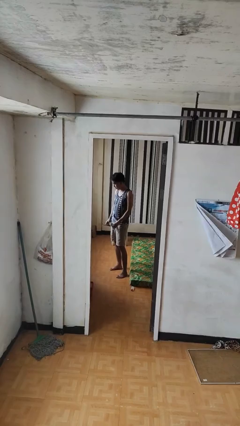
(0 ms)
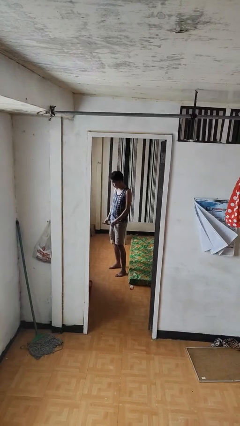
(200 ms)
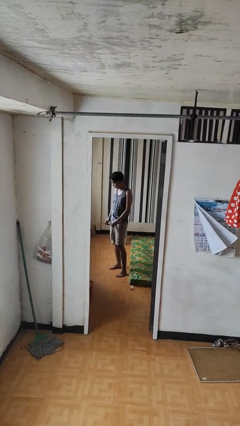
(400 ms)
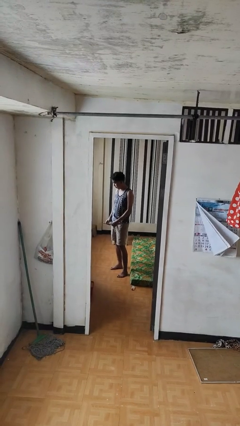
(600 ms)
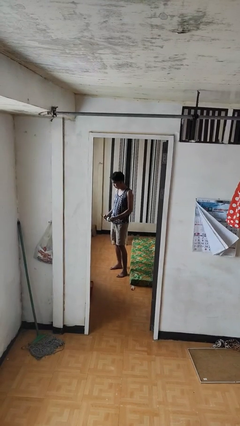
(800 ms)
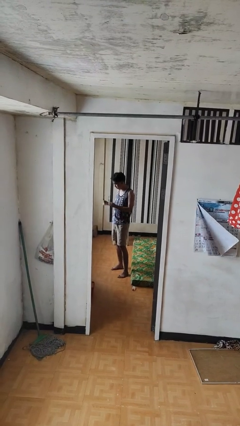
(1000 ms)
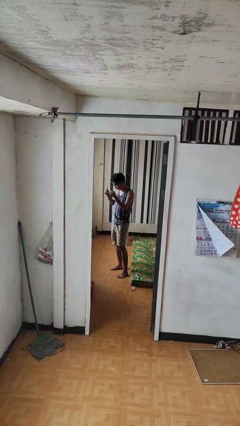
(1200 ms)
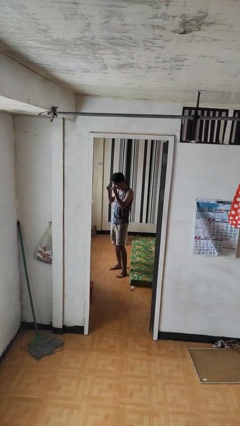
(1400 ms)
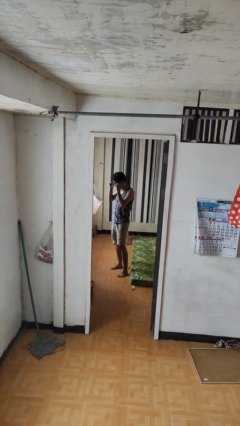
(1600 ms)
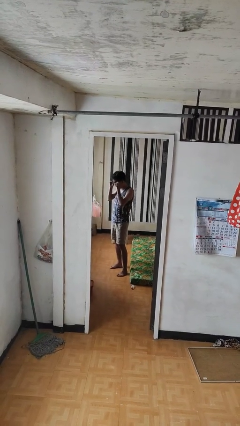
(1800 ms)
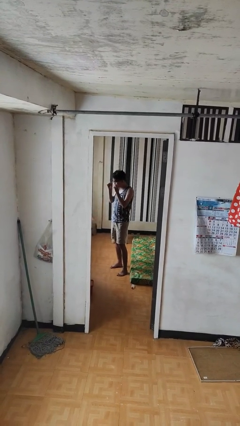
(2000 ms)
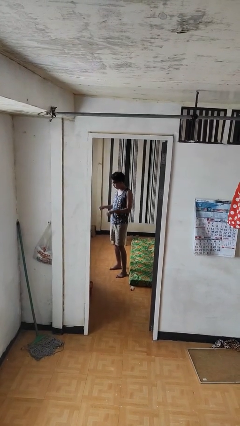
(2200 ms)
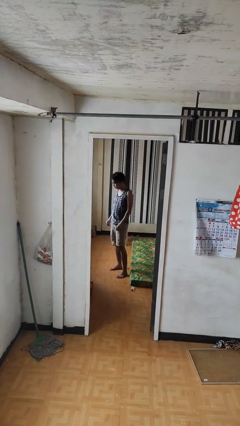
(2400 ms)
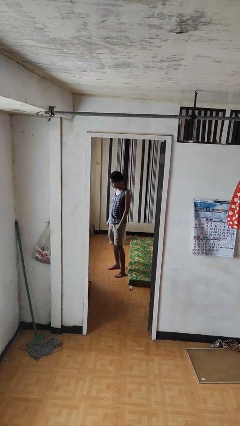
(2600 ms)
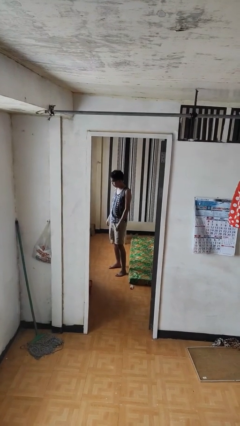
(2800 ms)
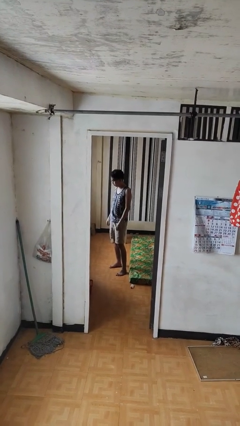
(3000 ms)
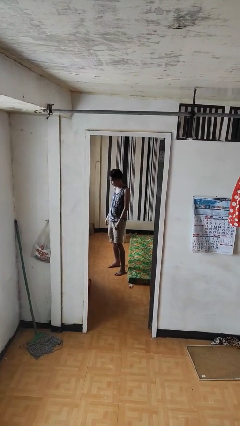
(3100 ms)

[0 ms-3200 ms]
person puts on glasses

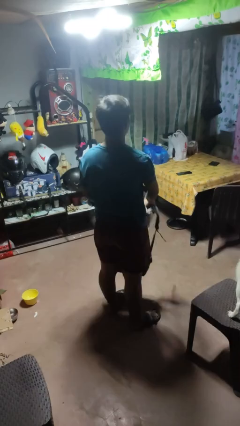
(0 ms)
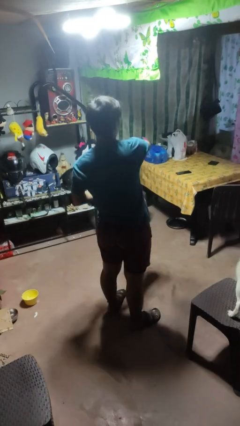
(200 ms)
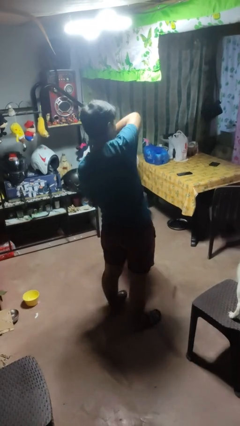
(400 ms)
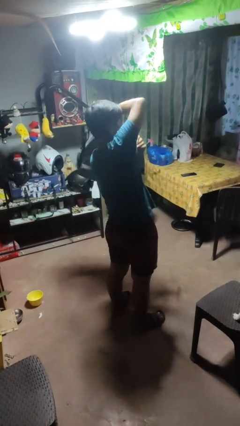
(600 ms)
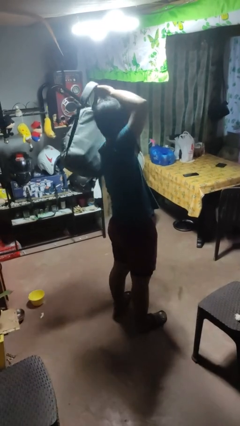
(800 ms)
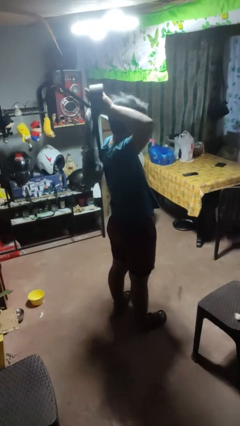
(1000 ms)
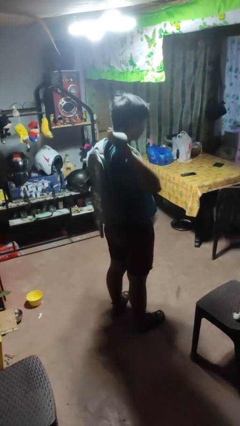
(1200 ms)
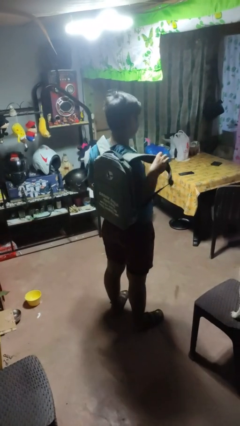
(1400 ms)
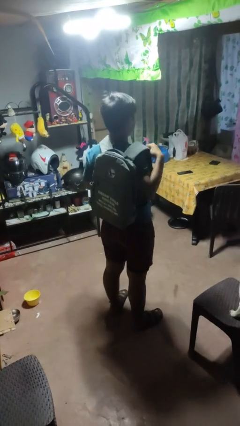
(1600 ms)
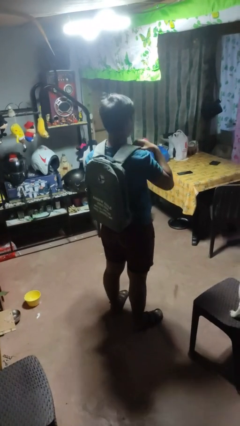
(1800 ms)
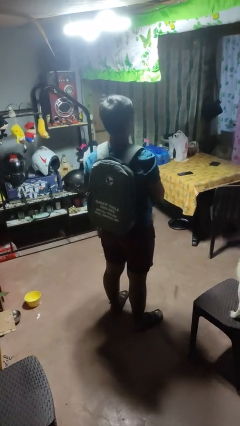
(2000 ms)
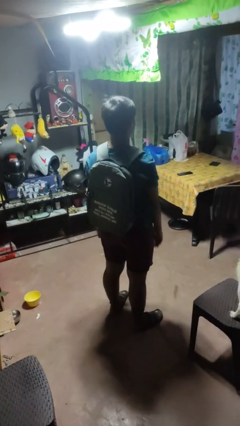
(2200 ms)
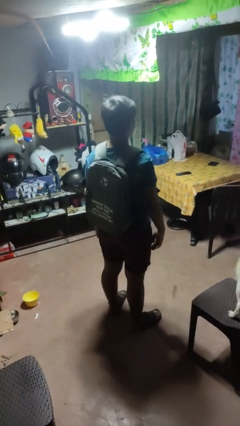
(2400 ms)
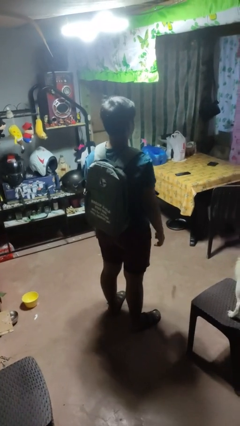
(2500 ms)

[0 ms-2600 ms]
person puts on backpack

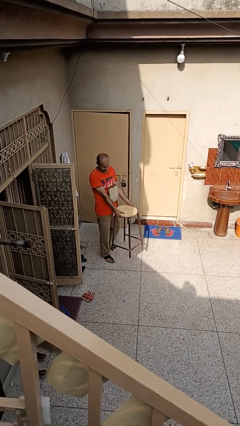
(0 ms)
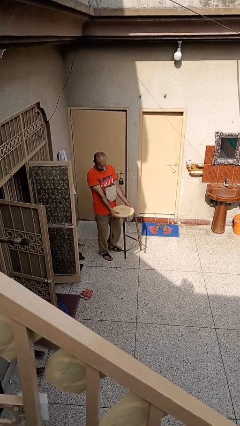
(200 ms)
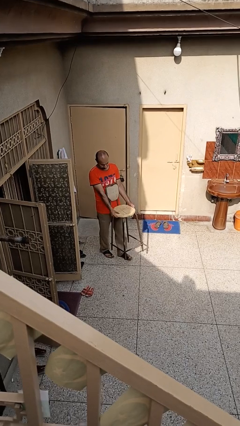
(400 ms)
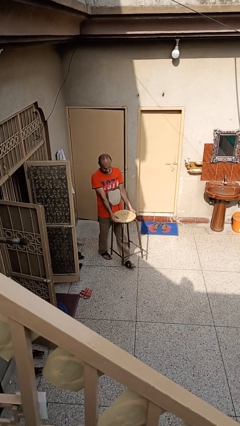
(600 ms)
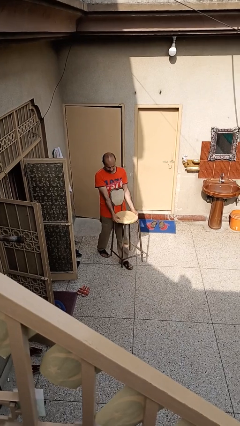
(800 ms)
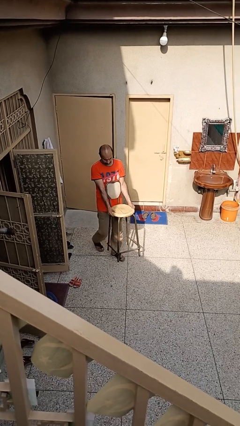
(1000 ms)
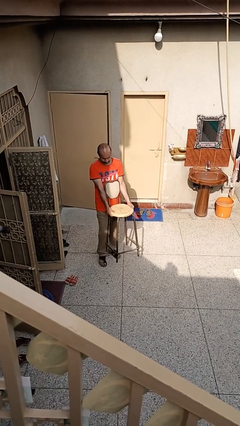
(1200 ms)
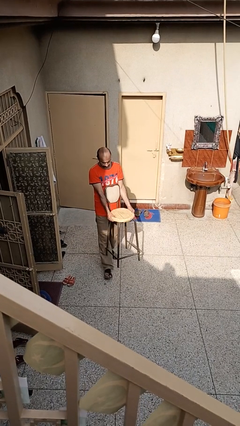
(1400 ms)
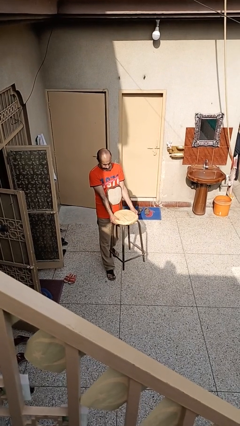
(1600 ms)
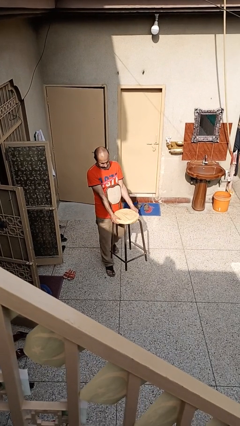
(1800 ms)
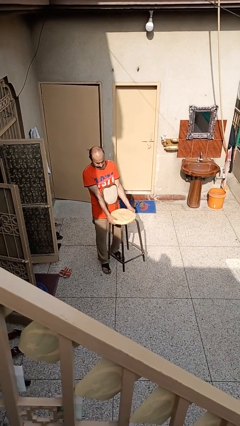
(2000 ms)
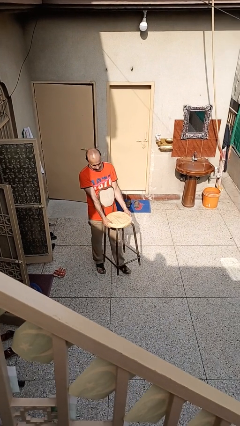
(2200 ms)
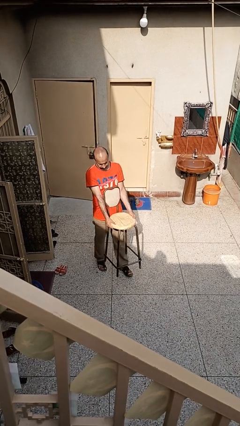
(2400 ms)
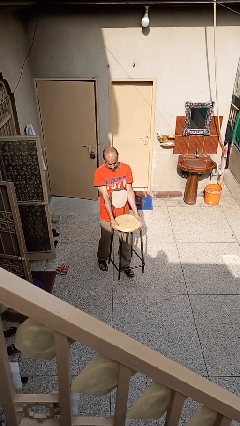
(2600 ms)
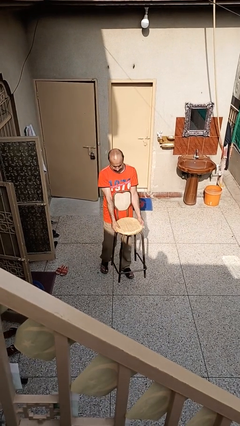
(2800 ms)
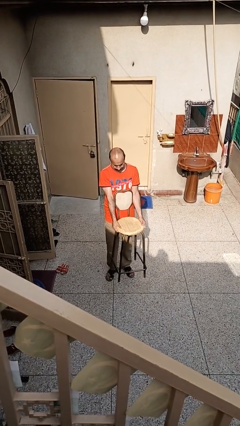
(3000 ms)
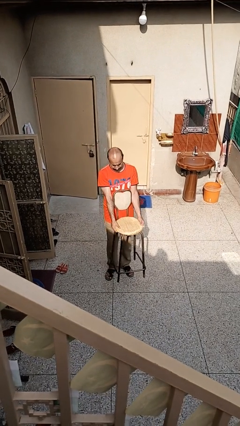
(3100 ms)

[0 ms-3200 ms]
person carries furniture

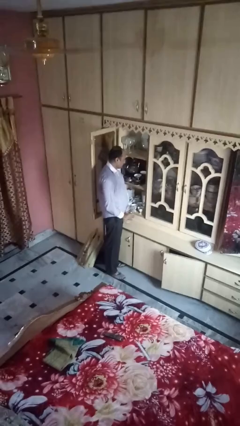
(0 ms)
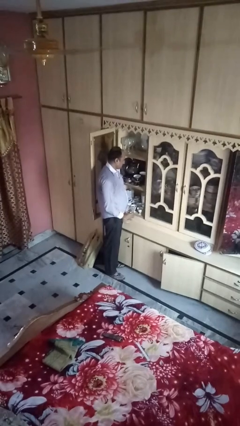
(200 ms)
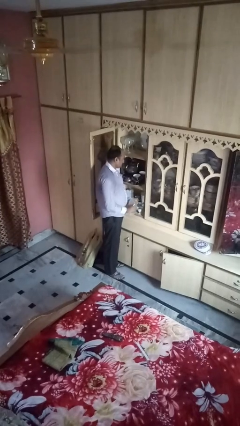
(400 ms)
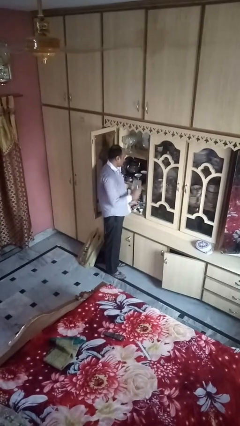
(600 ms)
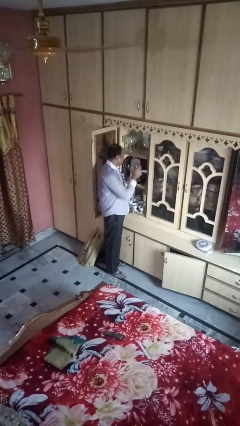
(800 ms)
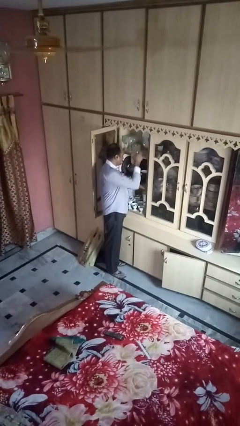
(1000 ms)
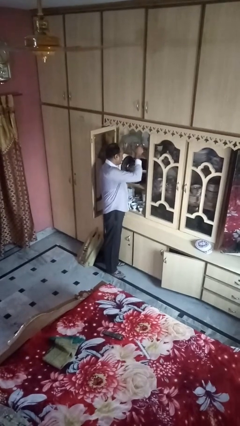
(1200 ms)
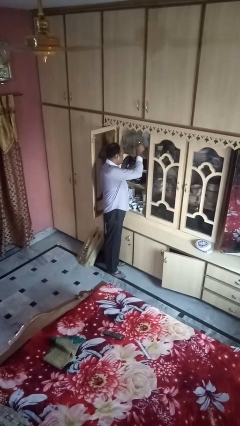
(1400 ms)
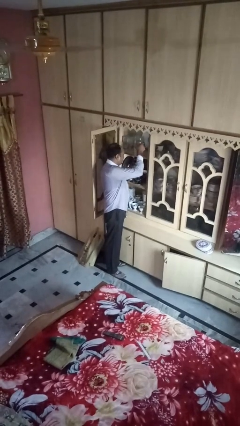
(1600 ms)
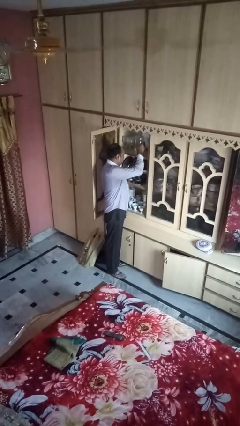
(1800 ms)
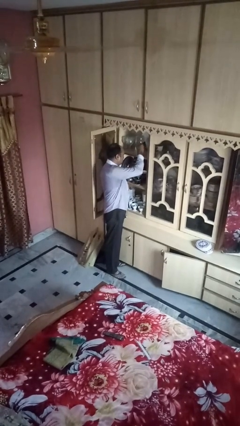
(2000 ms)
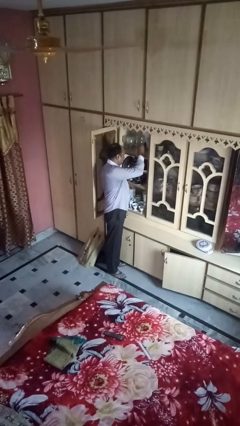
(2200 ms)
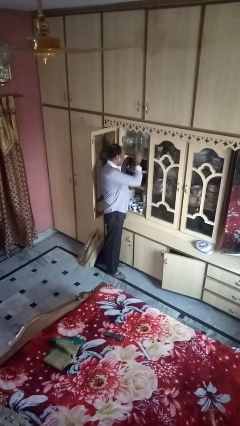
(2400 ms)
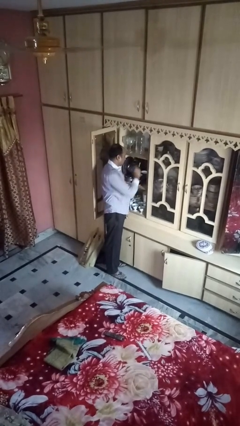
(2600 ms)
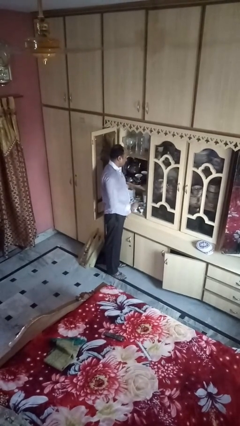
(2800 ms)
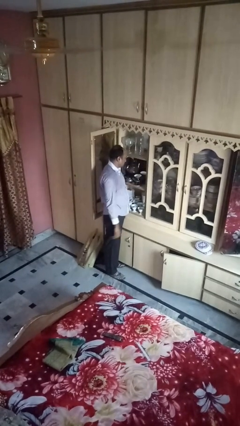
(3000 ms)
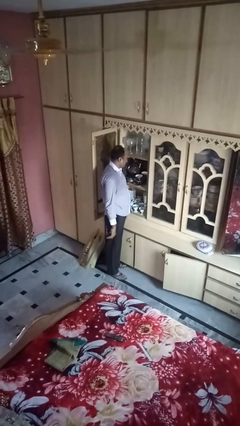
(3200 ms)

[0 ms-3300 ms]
person puts down object into cabinet

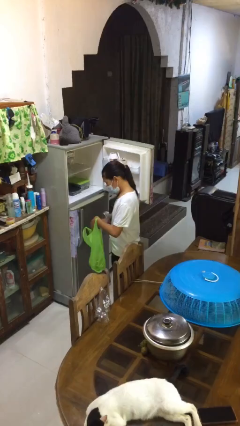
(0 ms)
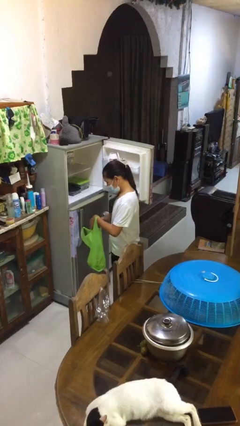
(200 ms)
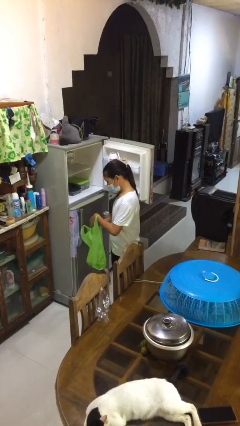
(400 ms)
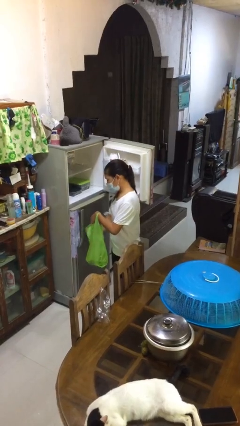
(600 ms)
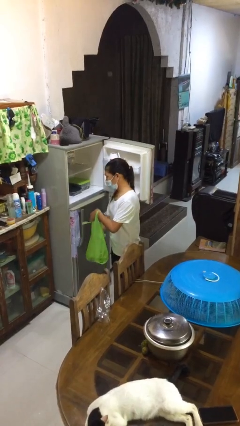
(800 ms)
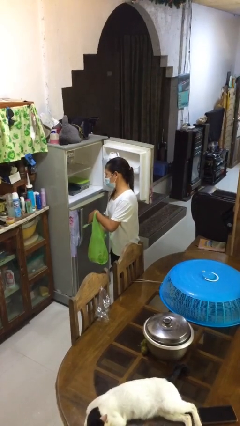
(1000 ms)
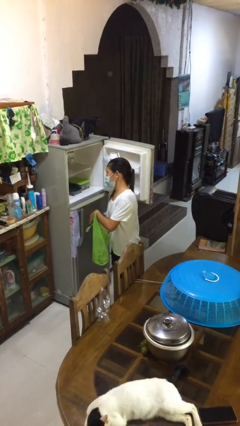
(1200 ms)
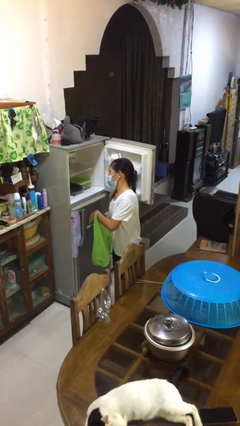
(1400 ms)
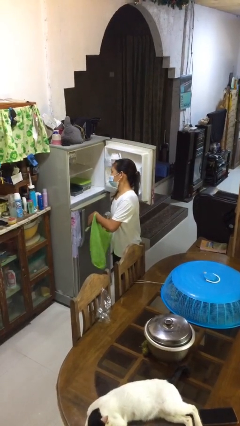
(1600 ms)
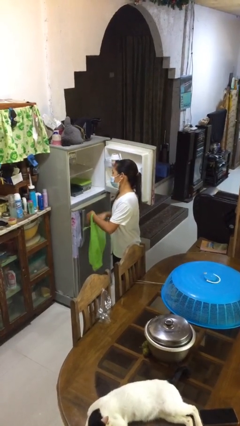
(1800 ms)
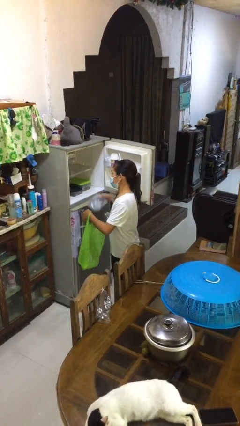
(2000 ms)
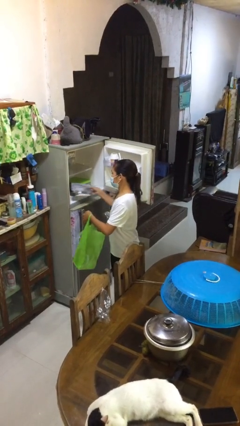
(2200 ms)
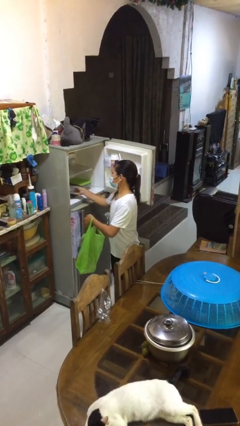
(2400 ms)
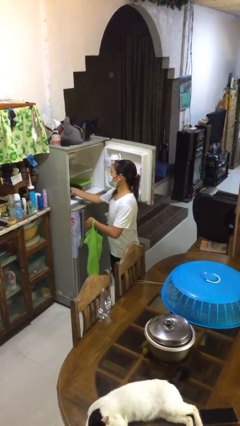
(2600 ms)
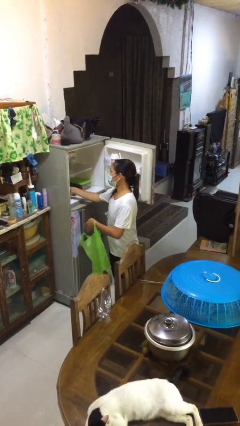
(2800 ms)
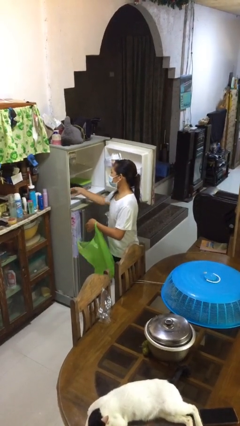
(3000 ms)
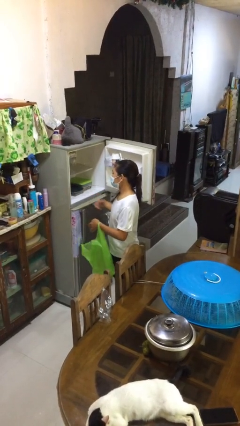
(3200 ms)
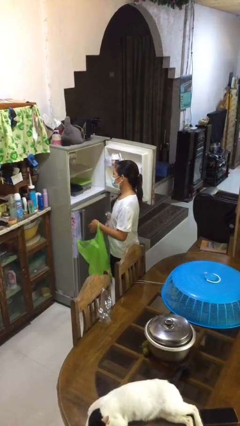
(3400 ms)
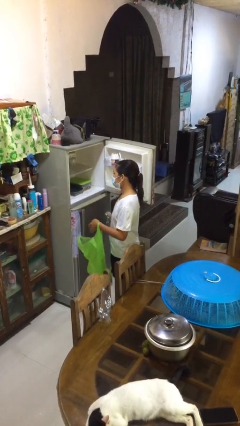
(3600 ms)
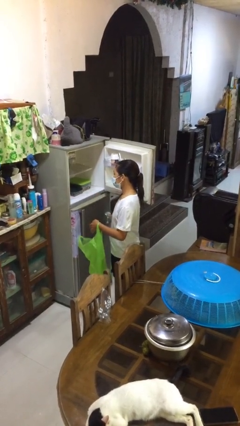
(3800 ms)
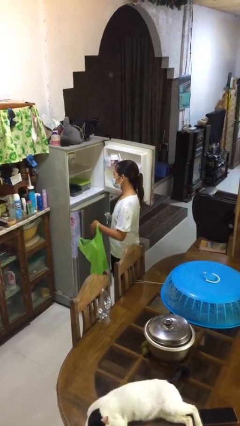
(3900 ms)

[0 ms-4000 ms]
person loads groceries into refrigerator

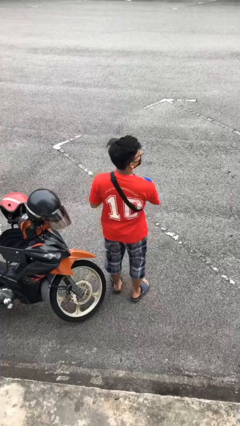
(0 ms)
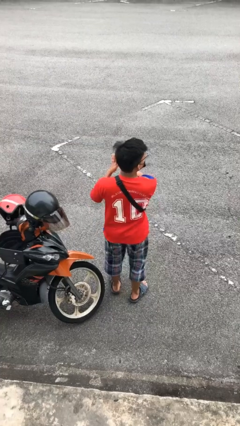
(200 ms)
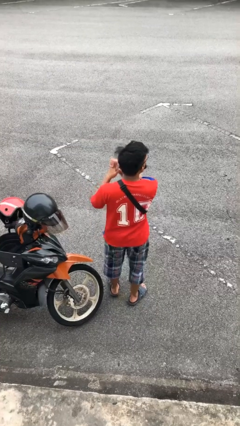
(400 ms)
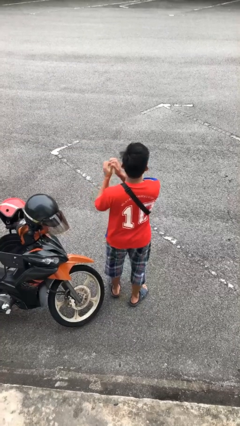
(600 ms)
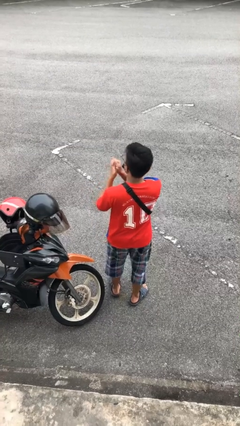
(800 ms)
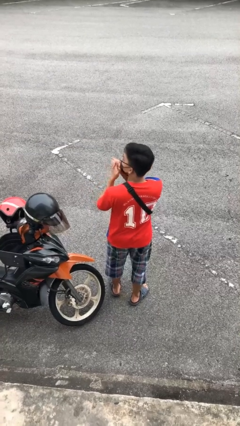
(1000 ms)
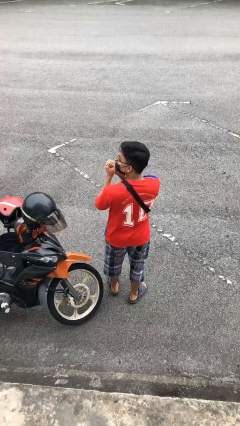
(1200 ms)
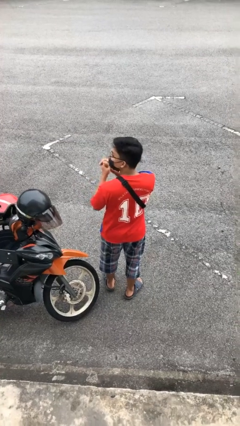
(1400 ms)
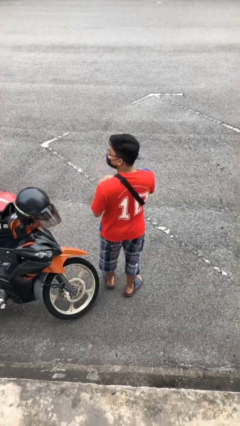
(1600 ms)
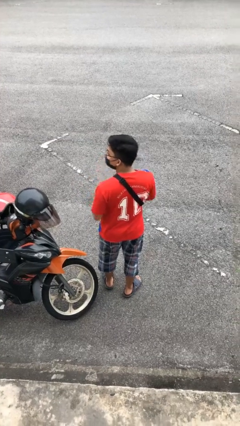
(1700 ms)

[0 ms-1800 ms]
person cracks knuckles
